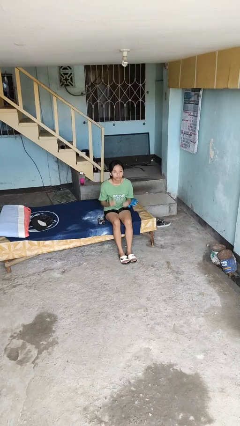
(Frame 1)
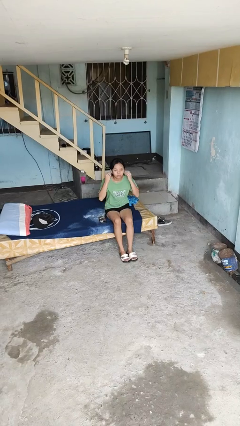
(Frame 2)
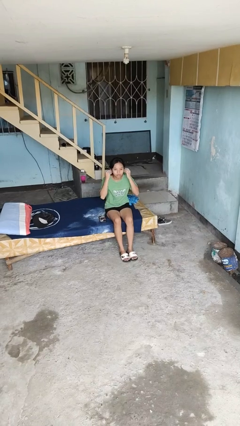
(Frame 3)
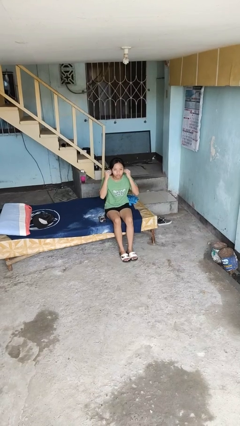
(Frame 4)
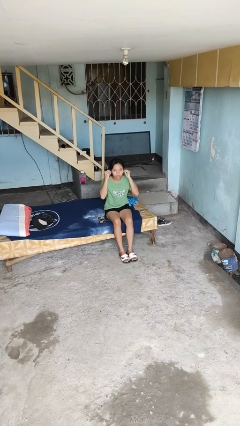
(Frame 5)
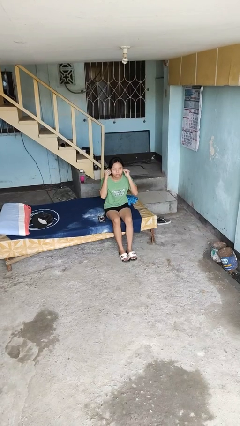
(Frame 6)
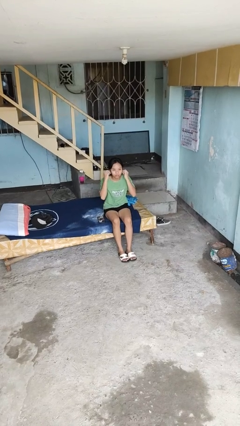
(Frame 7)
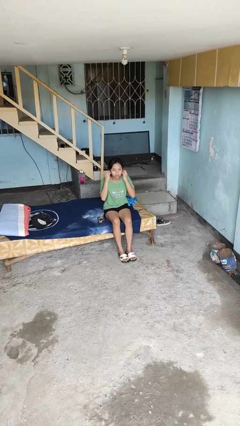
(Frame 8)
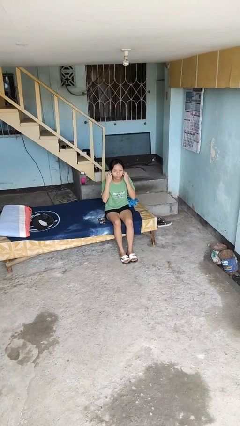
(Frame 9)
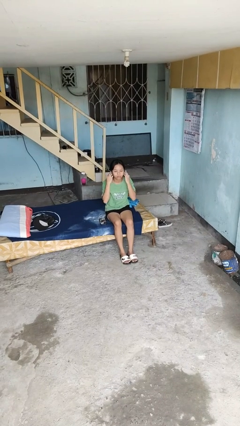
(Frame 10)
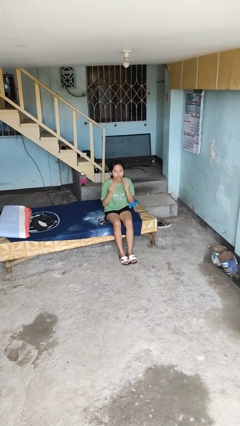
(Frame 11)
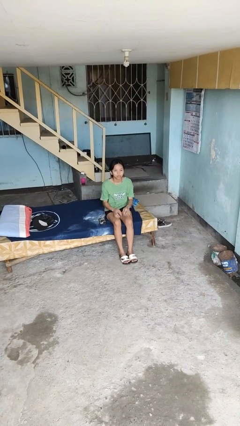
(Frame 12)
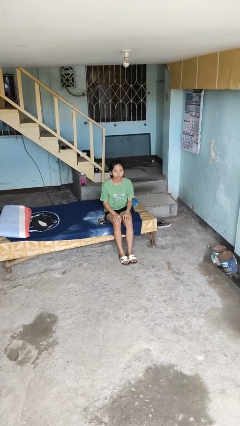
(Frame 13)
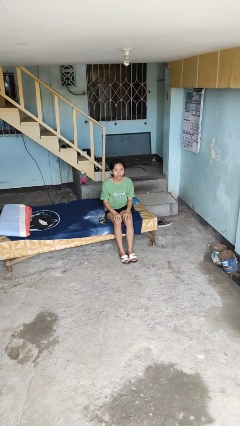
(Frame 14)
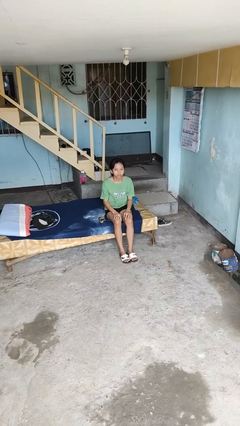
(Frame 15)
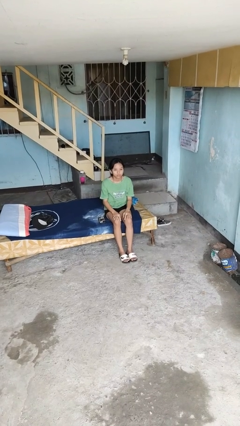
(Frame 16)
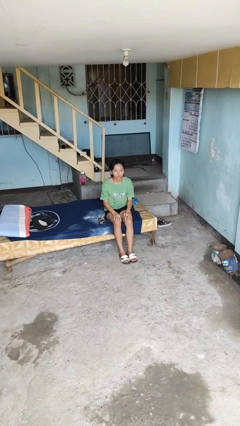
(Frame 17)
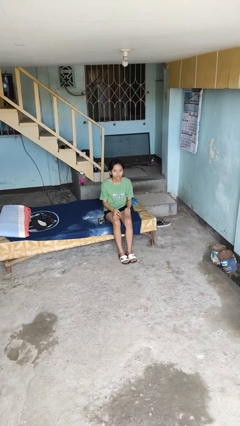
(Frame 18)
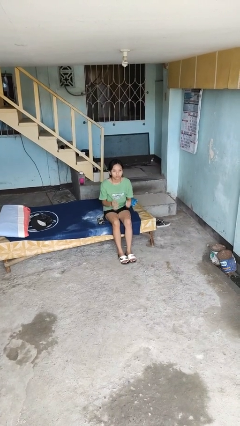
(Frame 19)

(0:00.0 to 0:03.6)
person puts on headphones

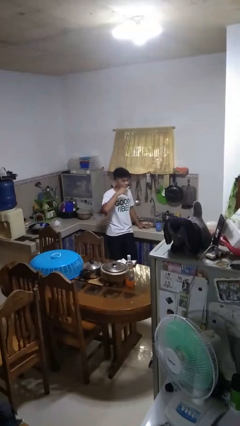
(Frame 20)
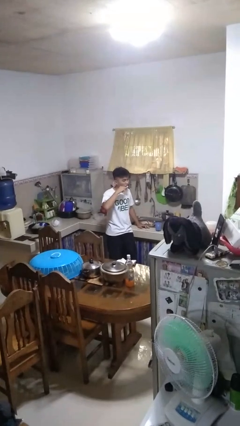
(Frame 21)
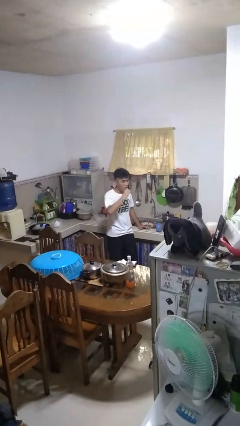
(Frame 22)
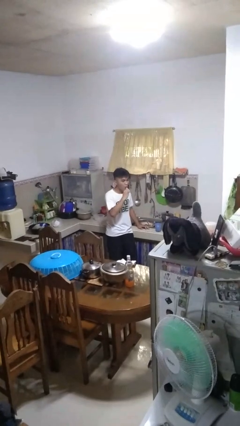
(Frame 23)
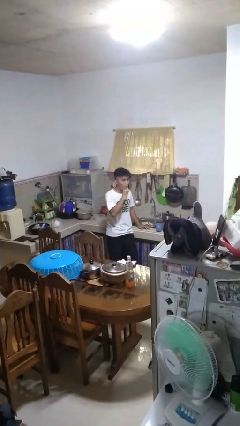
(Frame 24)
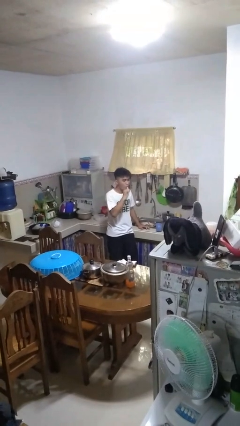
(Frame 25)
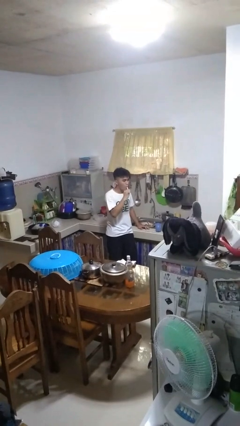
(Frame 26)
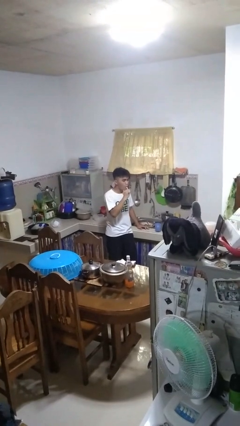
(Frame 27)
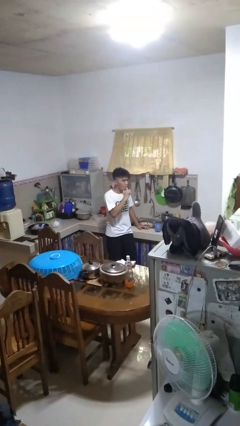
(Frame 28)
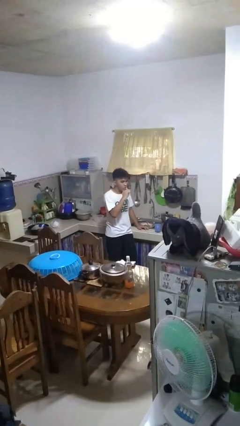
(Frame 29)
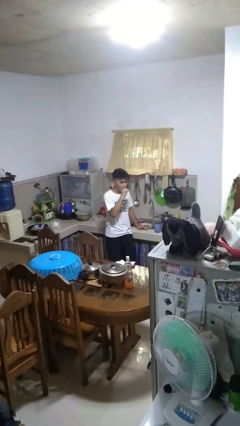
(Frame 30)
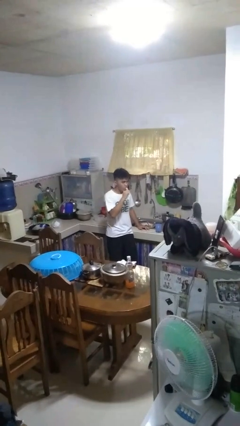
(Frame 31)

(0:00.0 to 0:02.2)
person brushes teeth

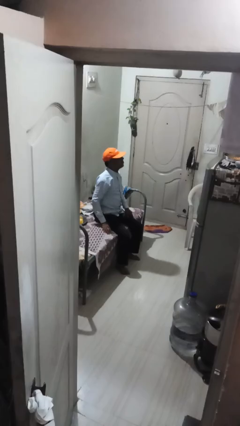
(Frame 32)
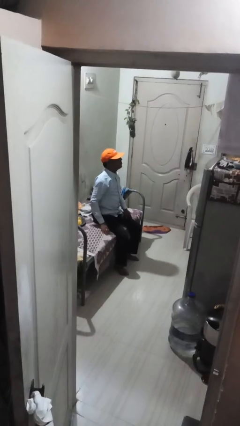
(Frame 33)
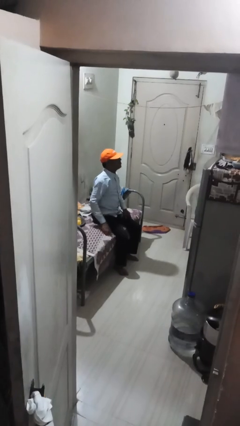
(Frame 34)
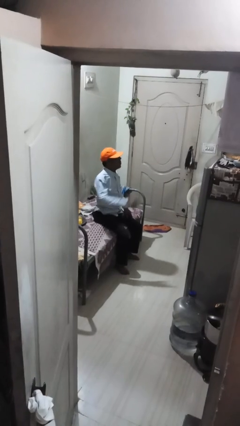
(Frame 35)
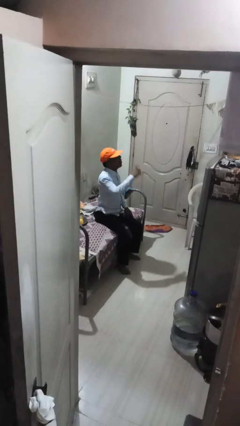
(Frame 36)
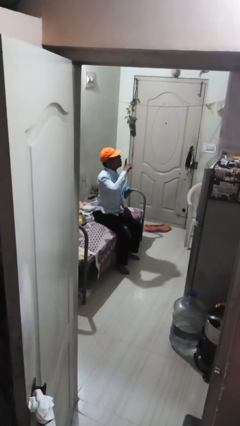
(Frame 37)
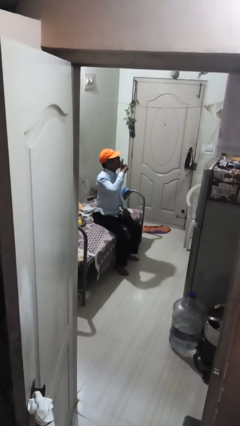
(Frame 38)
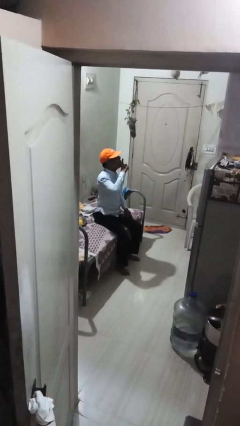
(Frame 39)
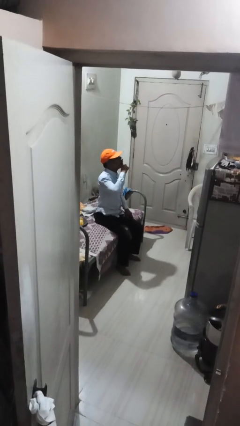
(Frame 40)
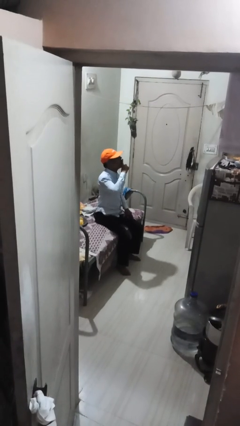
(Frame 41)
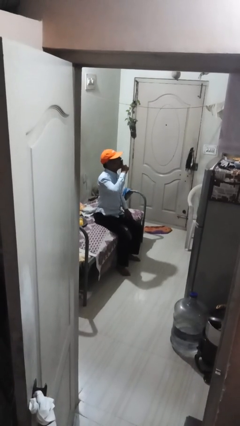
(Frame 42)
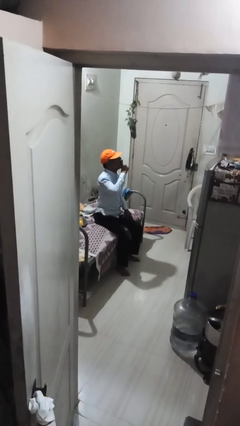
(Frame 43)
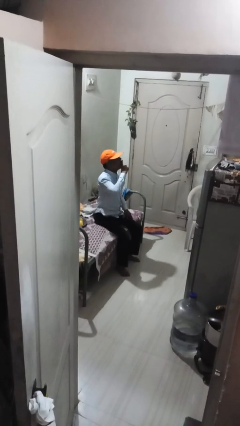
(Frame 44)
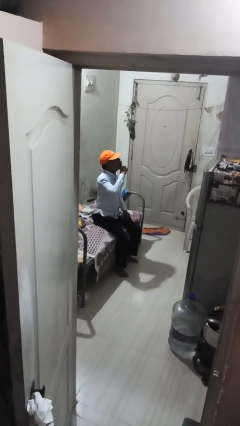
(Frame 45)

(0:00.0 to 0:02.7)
person gestures be quiet

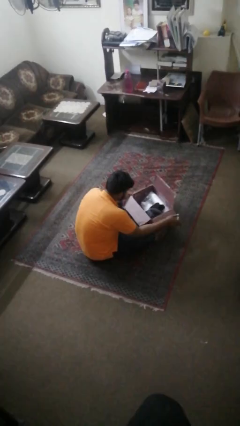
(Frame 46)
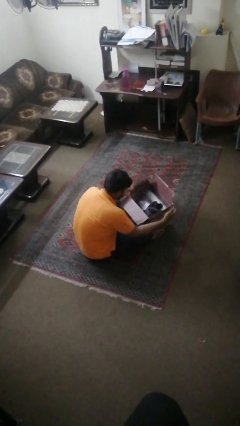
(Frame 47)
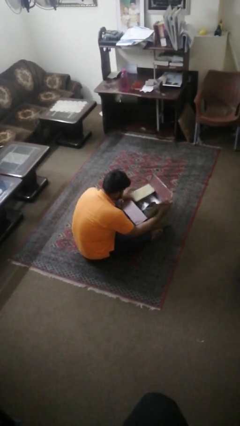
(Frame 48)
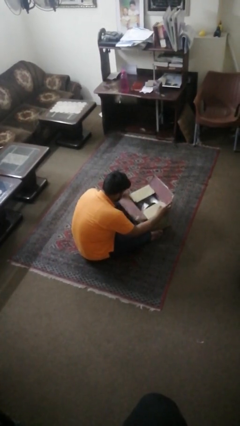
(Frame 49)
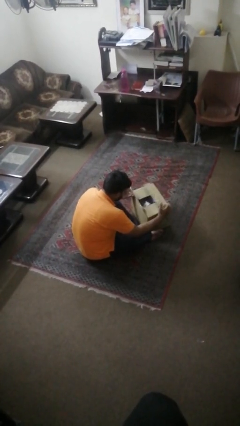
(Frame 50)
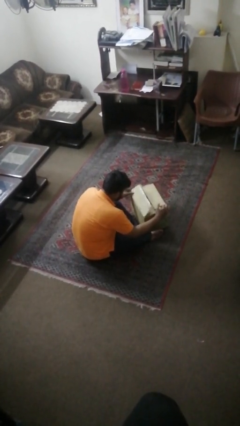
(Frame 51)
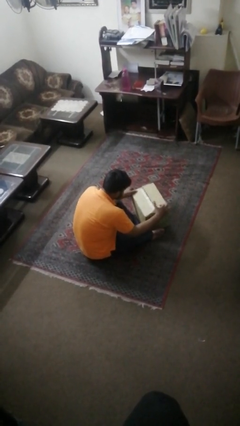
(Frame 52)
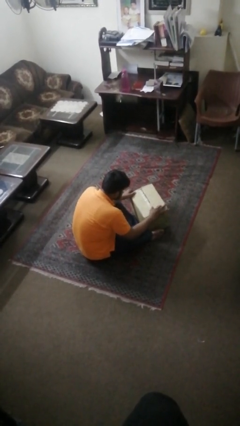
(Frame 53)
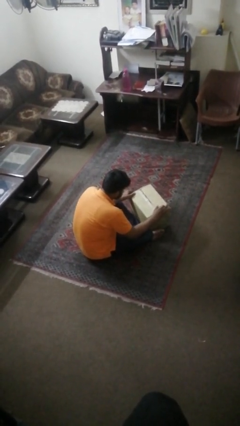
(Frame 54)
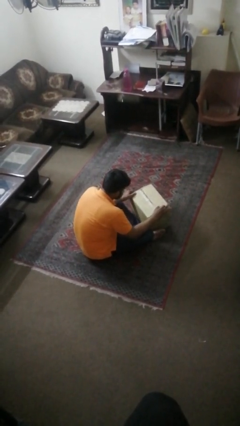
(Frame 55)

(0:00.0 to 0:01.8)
person closes box

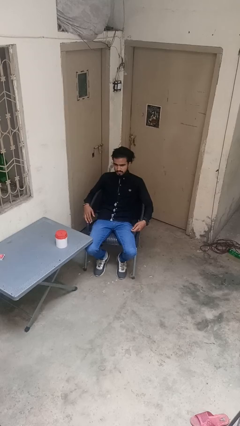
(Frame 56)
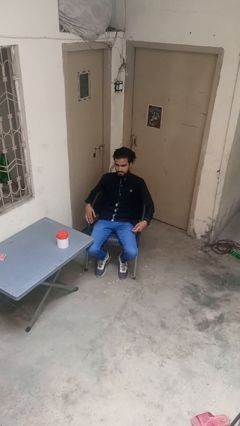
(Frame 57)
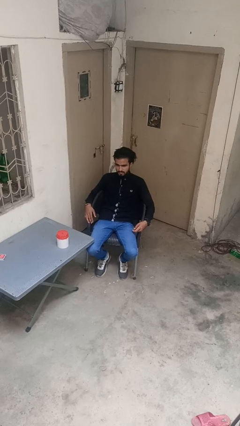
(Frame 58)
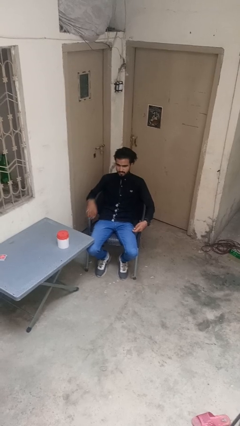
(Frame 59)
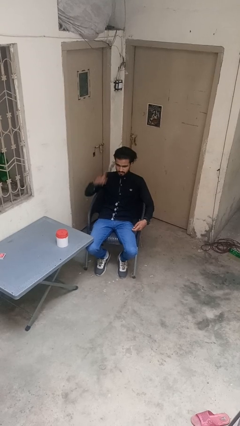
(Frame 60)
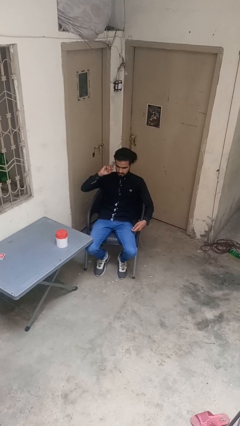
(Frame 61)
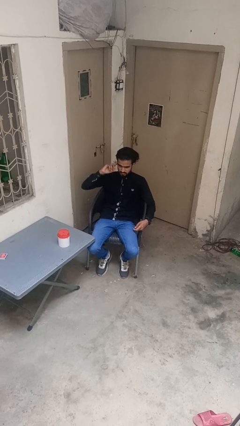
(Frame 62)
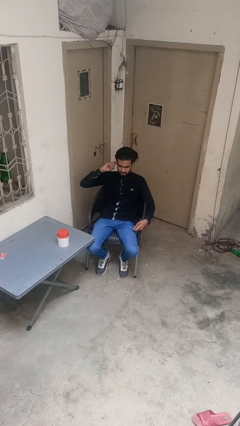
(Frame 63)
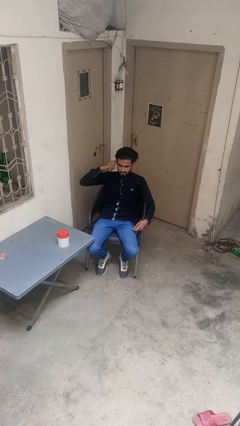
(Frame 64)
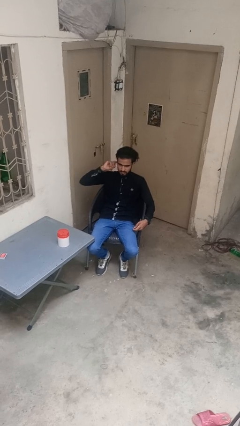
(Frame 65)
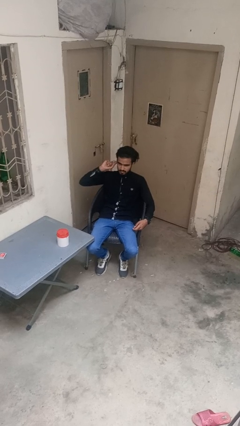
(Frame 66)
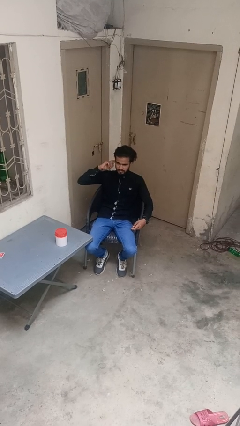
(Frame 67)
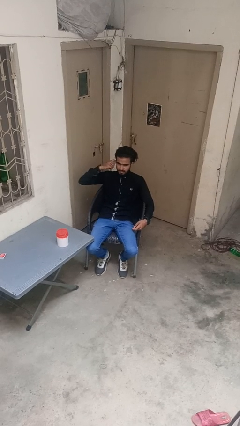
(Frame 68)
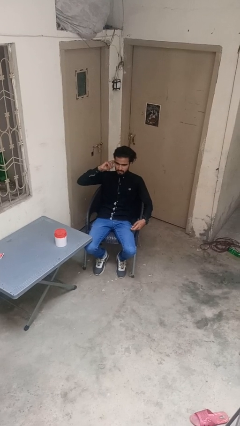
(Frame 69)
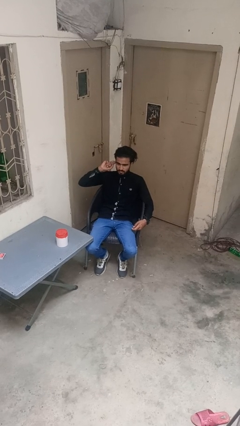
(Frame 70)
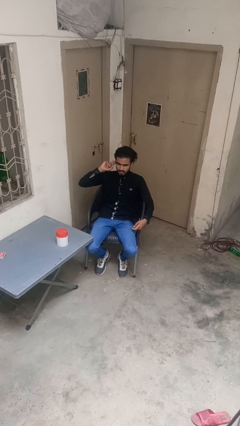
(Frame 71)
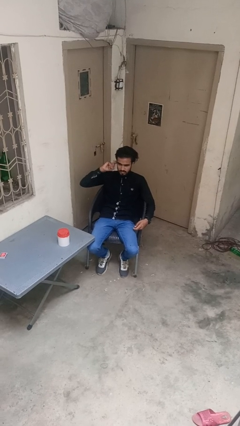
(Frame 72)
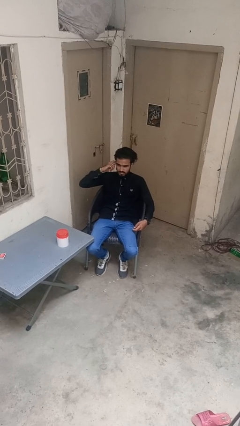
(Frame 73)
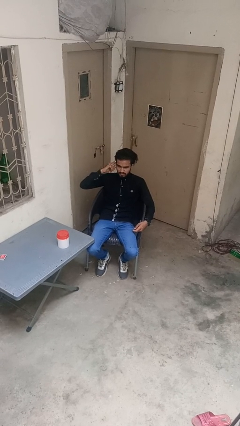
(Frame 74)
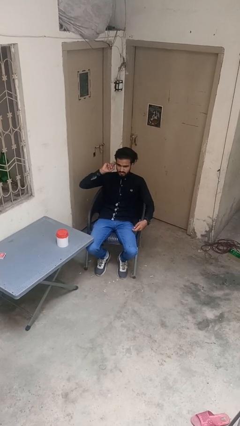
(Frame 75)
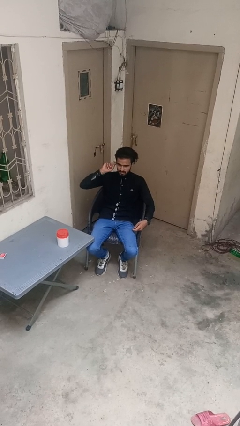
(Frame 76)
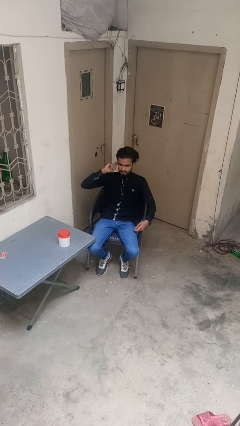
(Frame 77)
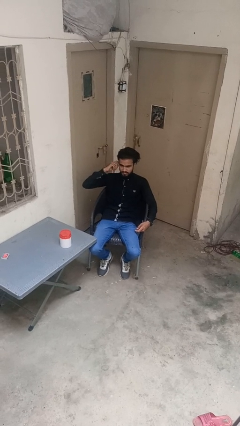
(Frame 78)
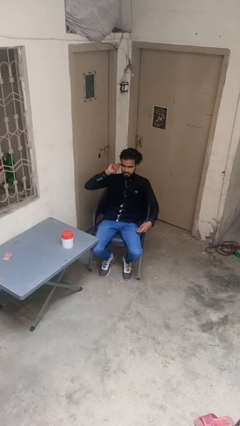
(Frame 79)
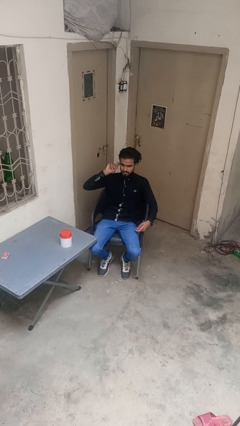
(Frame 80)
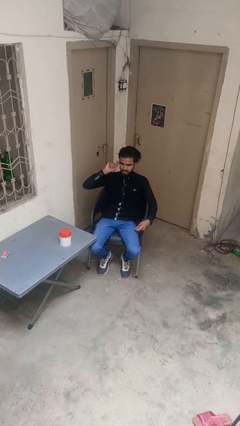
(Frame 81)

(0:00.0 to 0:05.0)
person puts fingers in ear

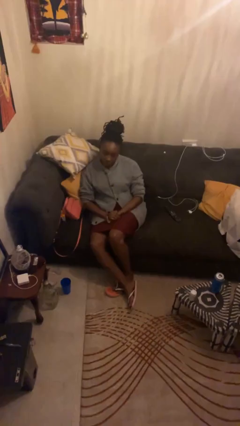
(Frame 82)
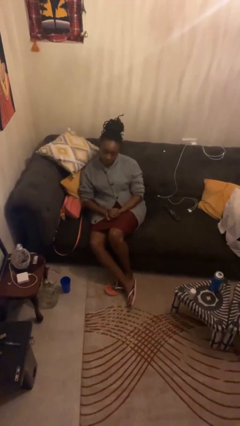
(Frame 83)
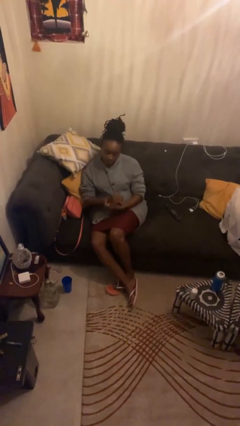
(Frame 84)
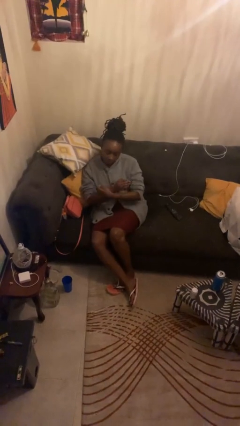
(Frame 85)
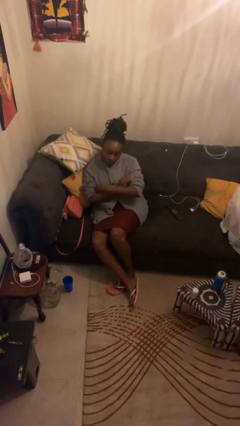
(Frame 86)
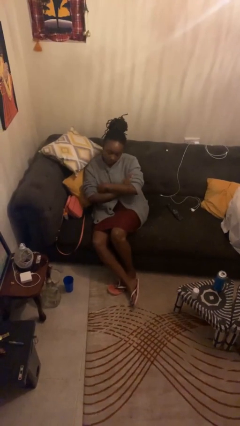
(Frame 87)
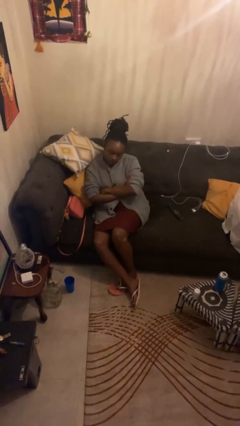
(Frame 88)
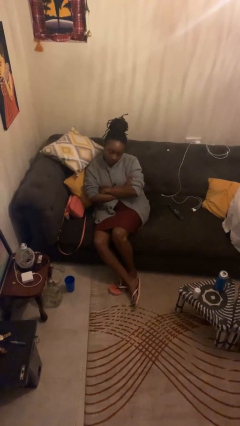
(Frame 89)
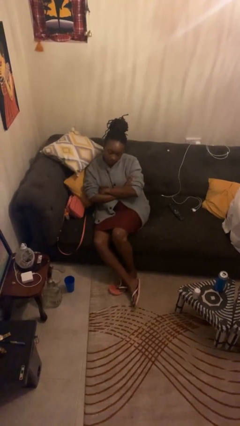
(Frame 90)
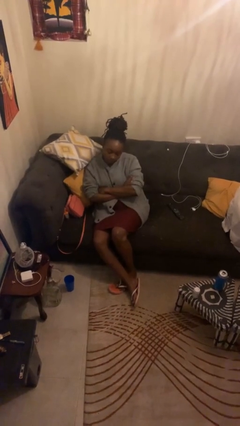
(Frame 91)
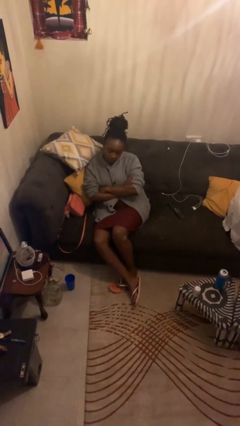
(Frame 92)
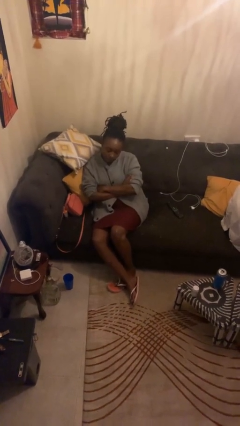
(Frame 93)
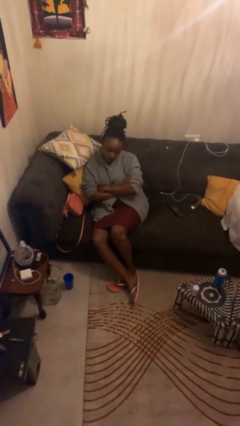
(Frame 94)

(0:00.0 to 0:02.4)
person crosses arms
